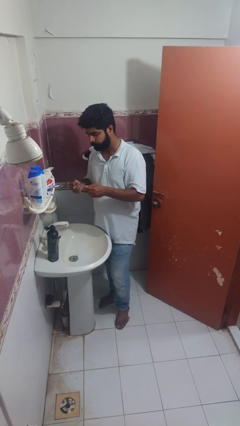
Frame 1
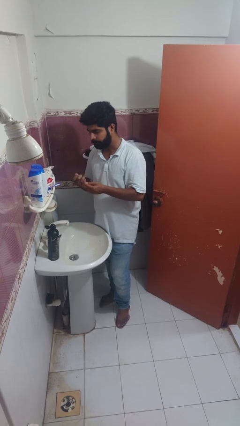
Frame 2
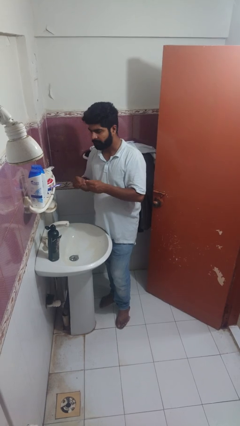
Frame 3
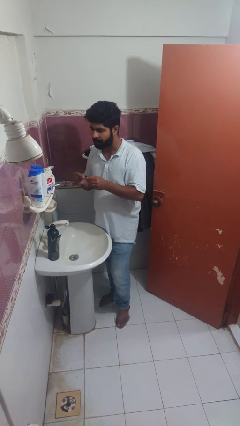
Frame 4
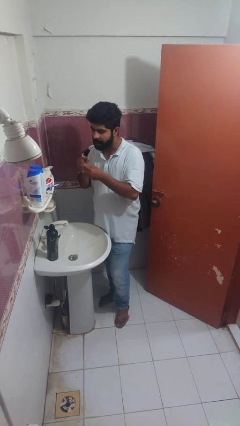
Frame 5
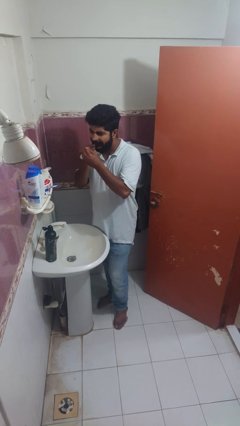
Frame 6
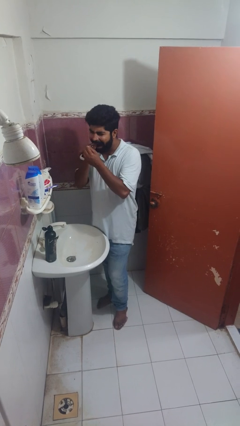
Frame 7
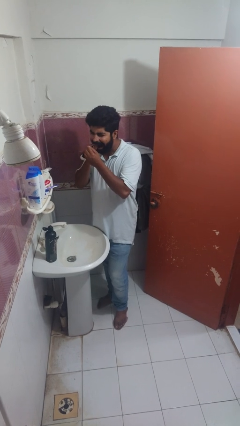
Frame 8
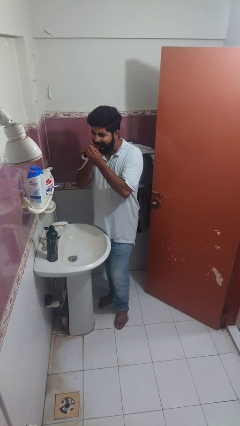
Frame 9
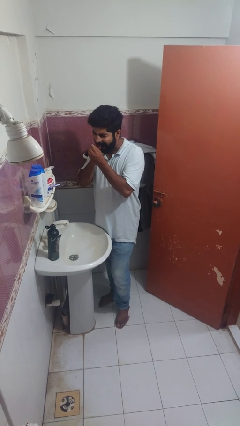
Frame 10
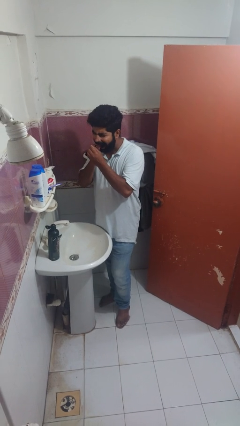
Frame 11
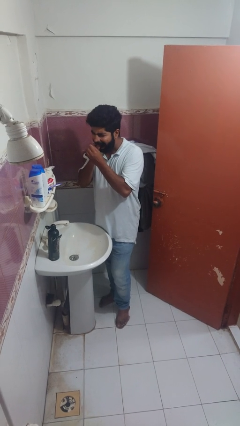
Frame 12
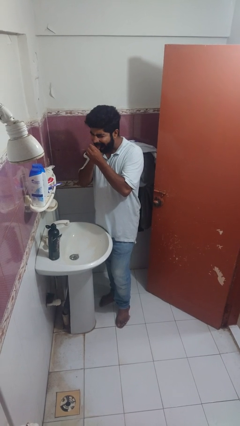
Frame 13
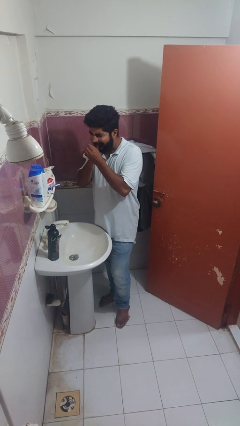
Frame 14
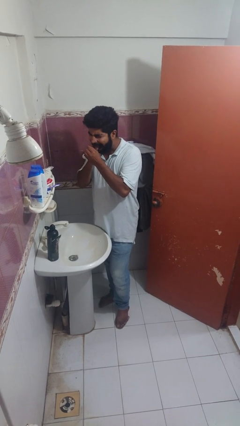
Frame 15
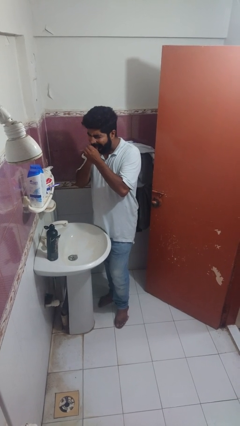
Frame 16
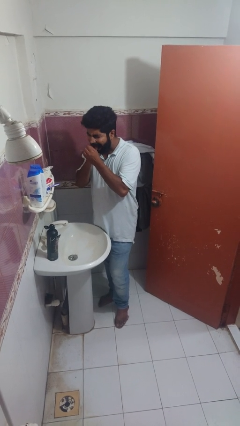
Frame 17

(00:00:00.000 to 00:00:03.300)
person flosses

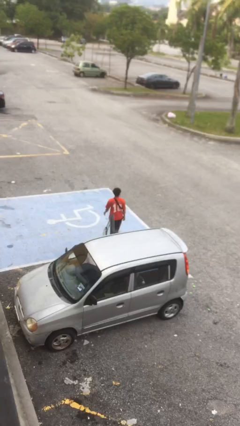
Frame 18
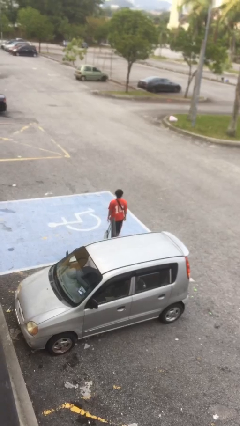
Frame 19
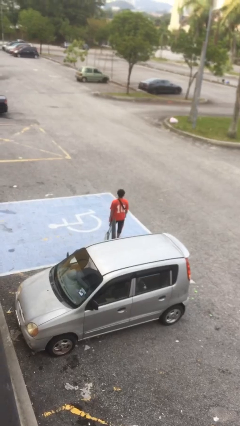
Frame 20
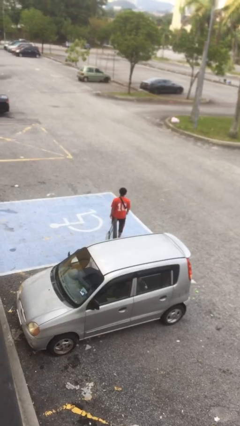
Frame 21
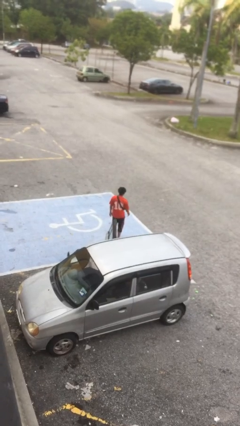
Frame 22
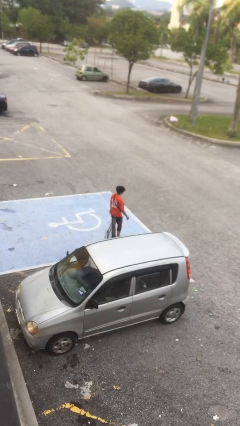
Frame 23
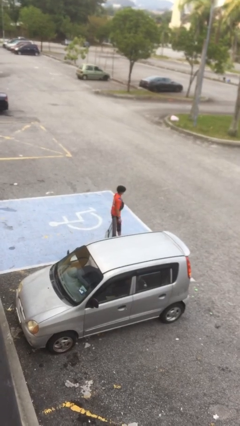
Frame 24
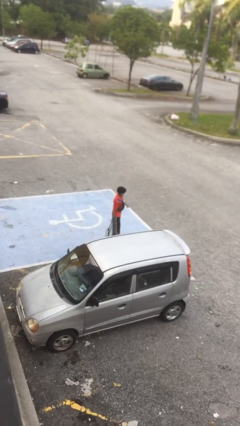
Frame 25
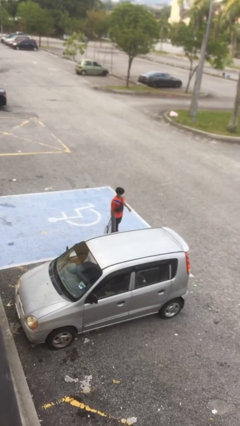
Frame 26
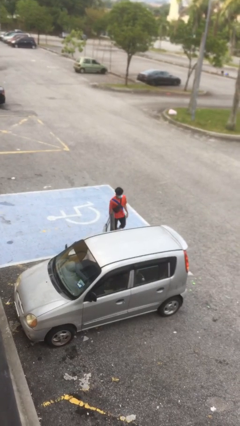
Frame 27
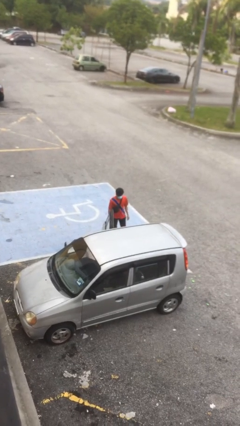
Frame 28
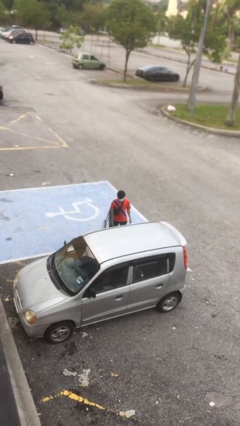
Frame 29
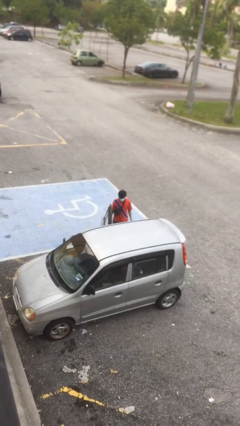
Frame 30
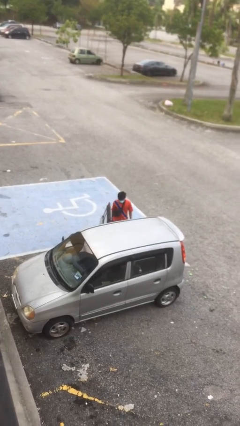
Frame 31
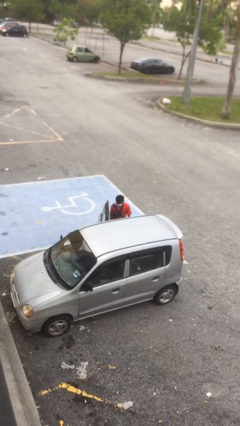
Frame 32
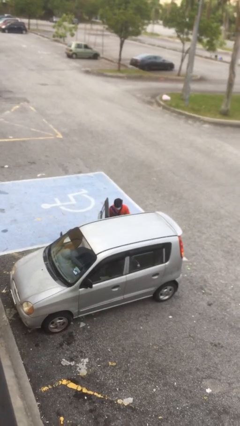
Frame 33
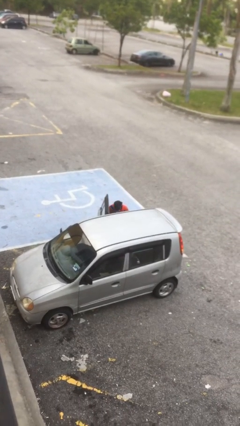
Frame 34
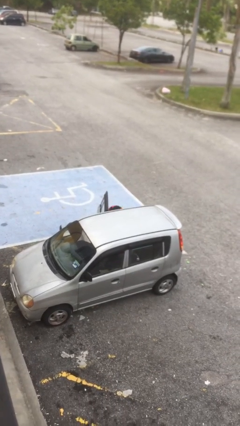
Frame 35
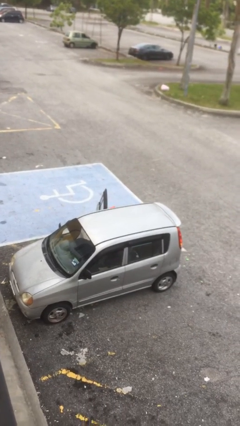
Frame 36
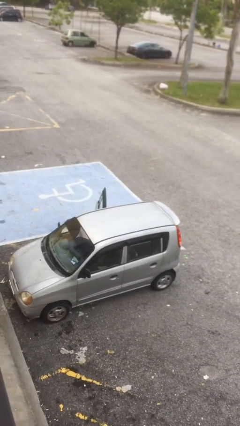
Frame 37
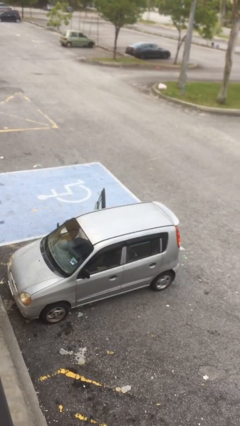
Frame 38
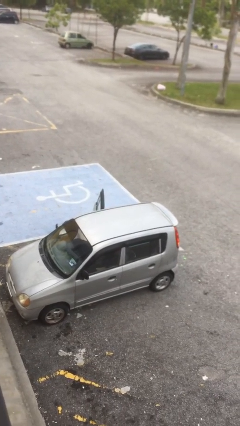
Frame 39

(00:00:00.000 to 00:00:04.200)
person enters car

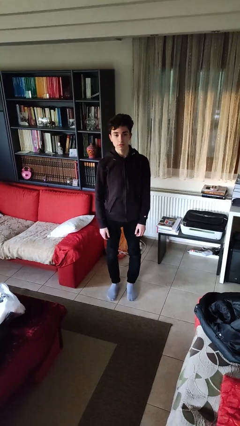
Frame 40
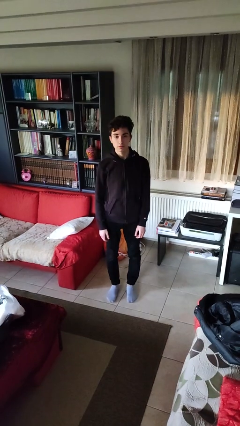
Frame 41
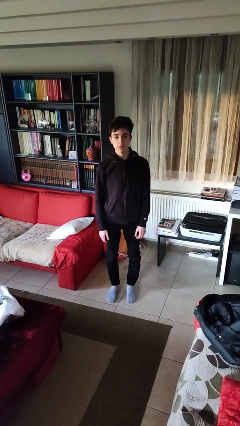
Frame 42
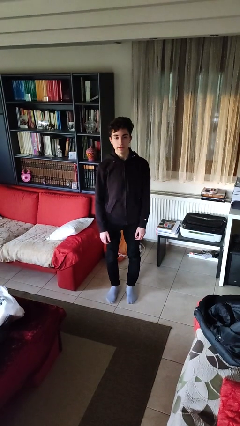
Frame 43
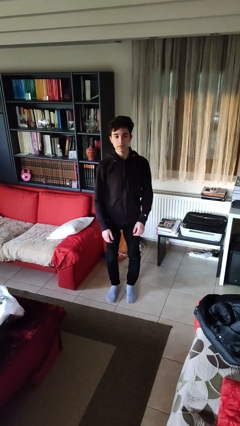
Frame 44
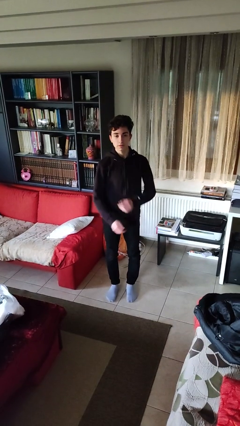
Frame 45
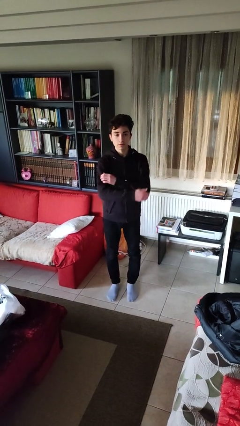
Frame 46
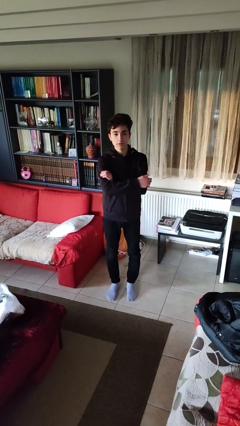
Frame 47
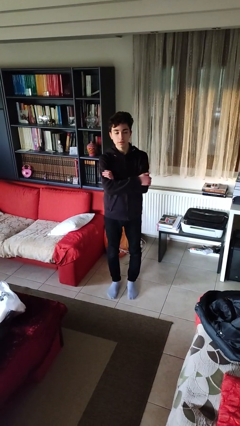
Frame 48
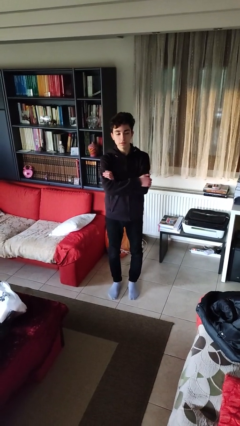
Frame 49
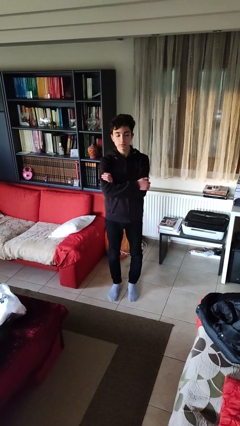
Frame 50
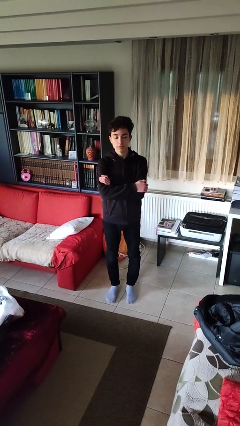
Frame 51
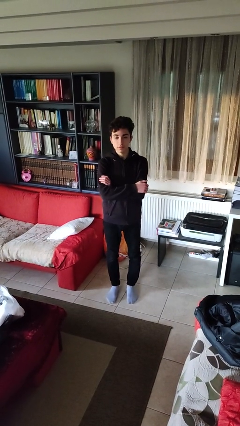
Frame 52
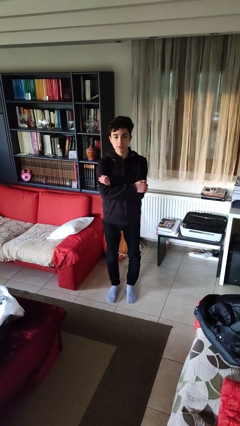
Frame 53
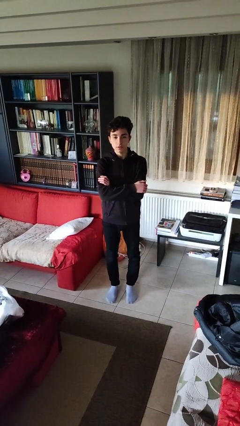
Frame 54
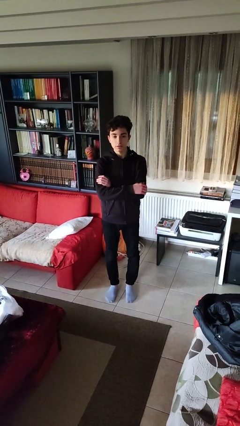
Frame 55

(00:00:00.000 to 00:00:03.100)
person crosses arms

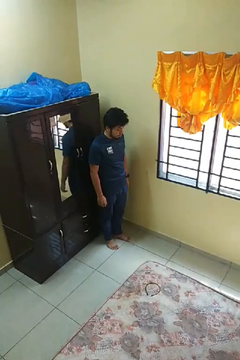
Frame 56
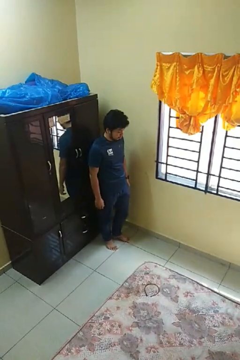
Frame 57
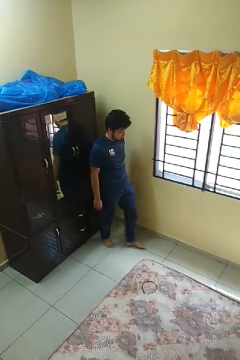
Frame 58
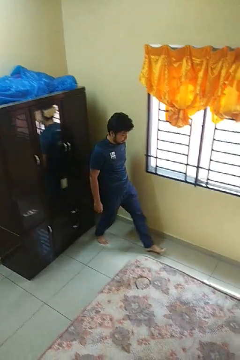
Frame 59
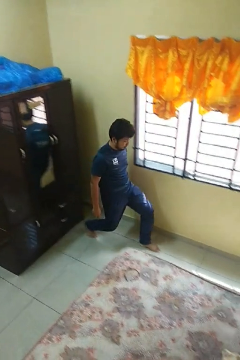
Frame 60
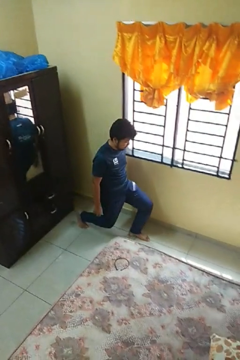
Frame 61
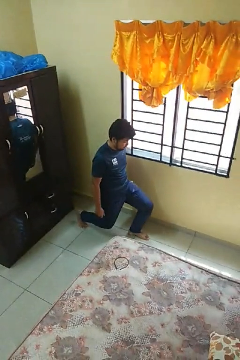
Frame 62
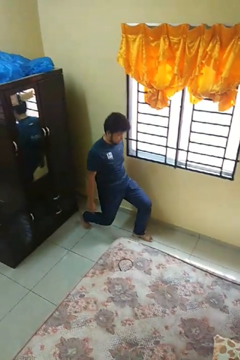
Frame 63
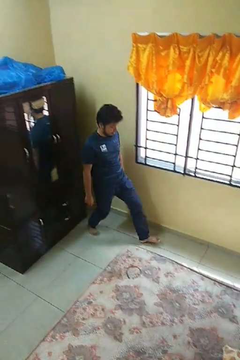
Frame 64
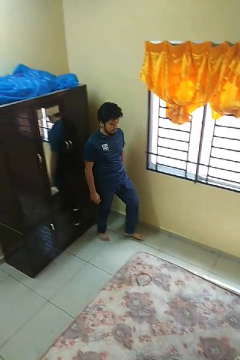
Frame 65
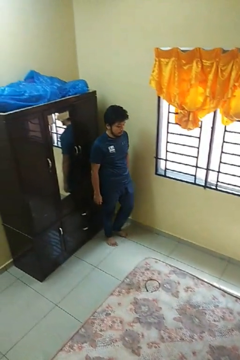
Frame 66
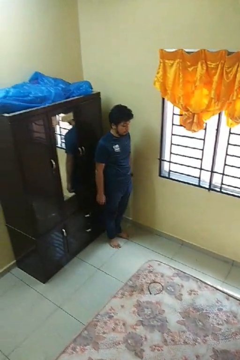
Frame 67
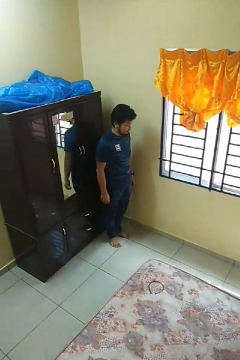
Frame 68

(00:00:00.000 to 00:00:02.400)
person exercises with lunges

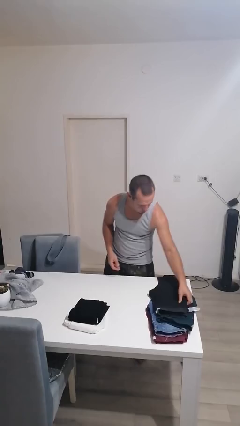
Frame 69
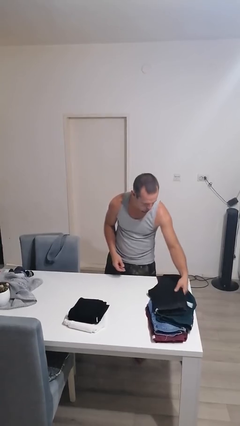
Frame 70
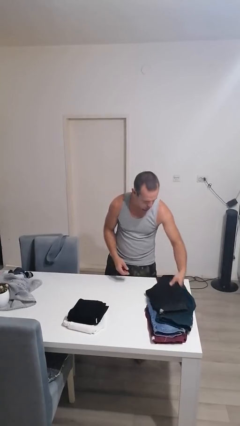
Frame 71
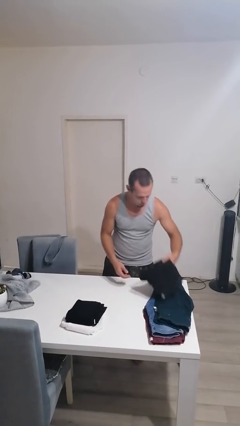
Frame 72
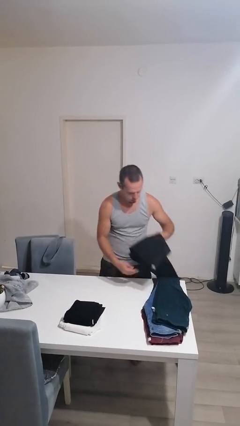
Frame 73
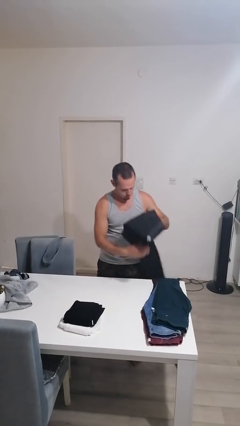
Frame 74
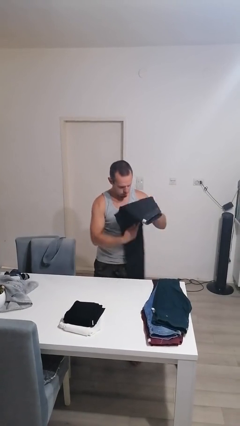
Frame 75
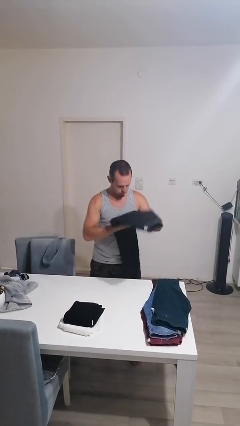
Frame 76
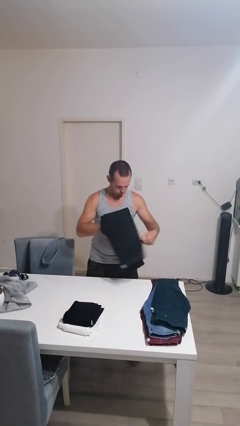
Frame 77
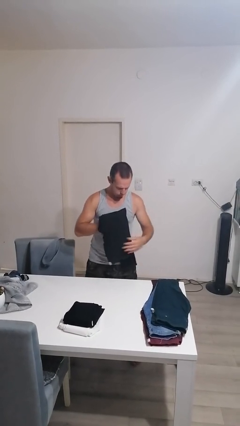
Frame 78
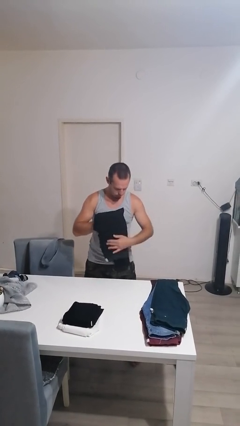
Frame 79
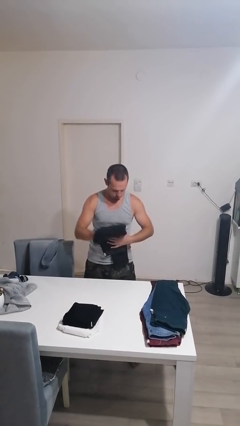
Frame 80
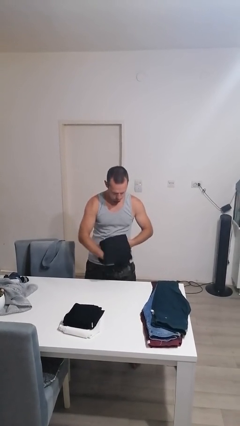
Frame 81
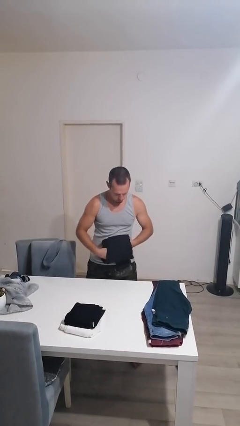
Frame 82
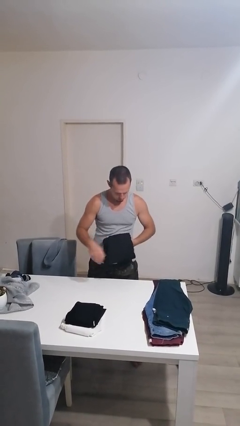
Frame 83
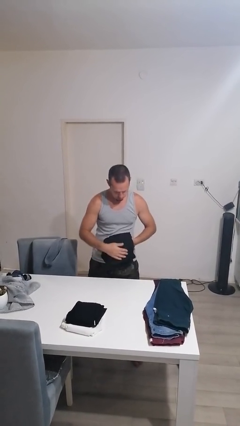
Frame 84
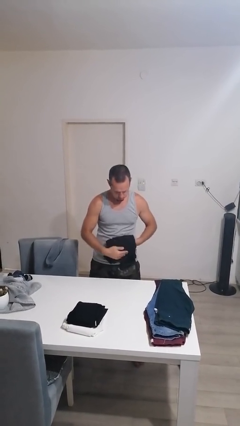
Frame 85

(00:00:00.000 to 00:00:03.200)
person folds pants

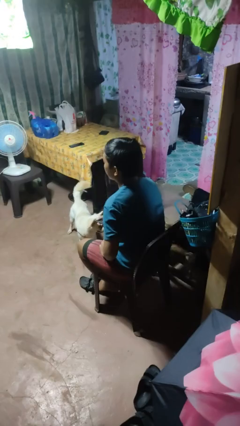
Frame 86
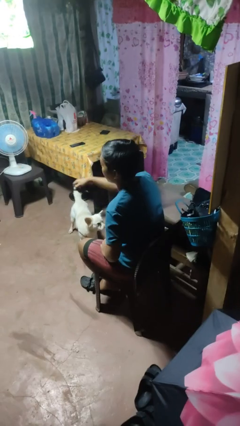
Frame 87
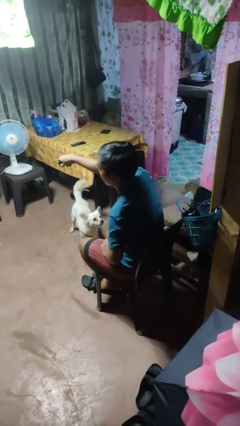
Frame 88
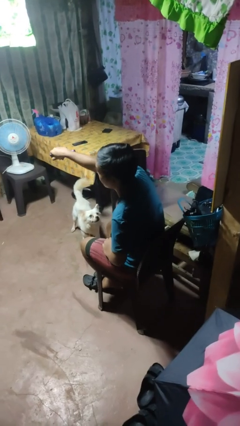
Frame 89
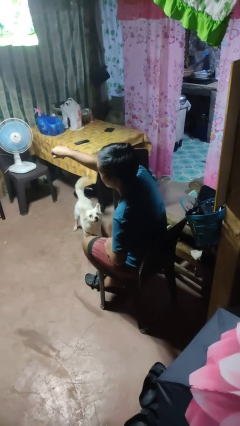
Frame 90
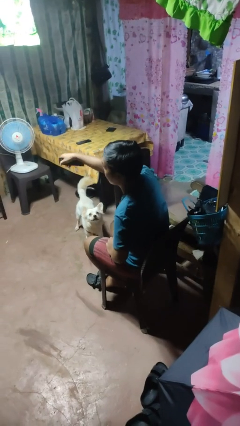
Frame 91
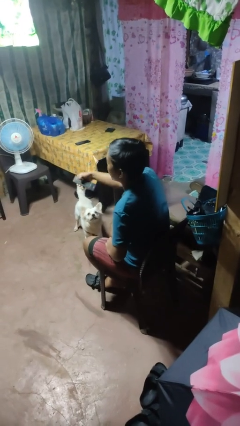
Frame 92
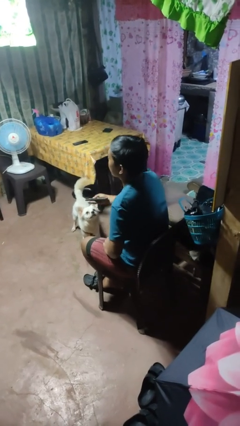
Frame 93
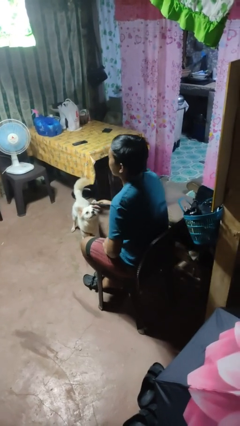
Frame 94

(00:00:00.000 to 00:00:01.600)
person uses television remote

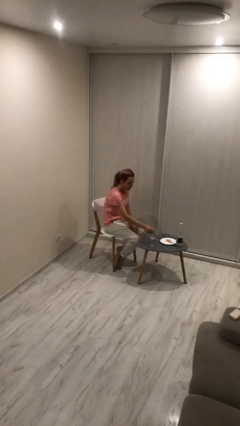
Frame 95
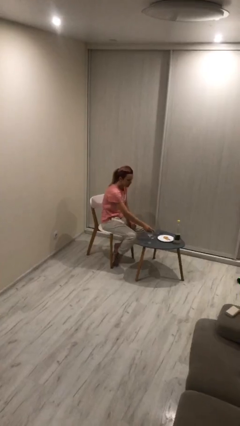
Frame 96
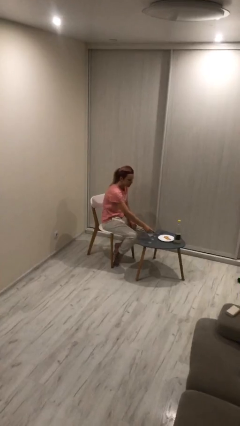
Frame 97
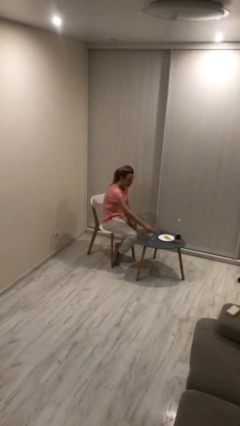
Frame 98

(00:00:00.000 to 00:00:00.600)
person puts down object on table
